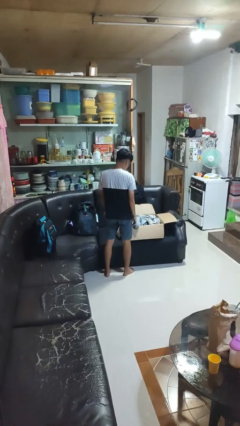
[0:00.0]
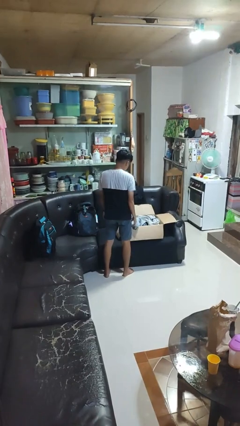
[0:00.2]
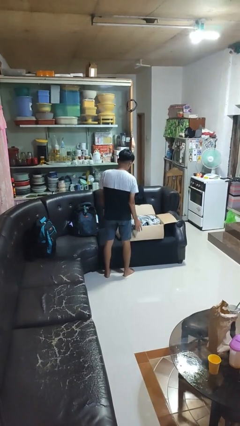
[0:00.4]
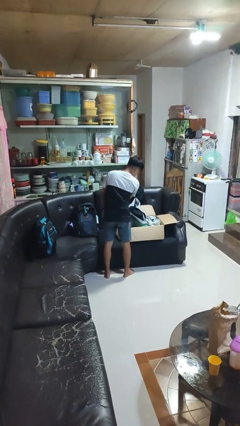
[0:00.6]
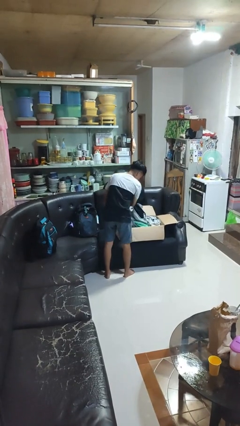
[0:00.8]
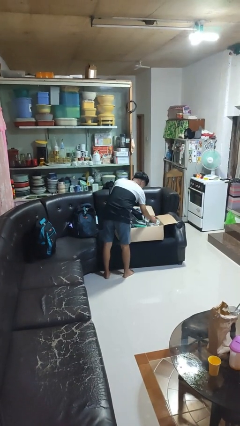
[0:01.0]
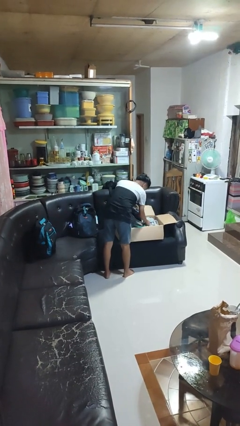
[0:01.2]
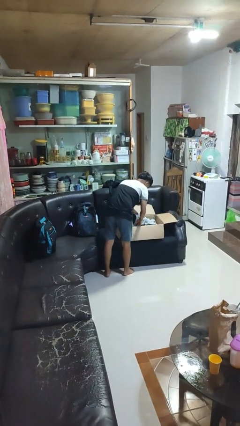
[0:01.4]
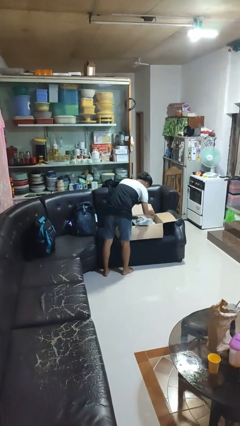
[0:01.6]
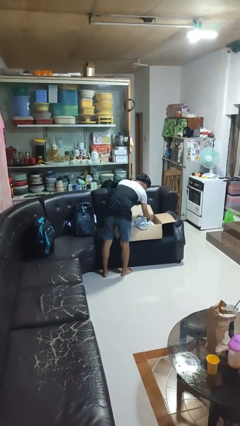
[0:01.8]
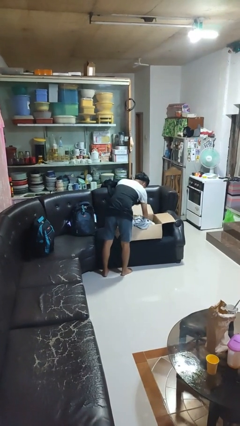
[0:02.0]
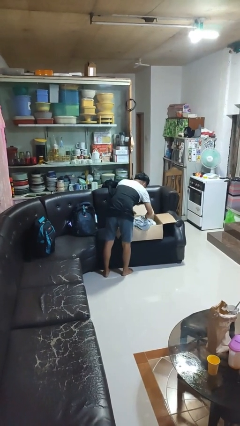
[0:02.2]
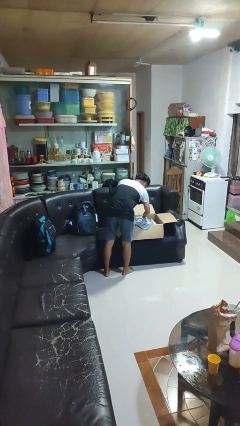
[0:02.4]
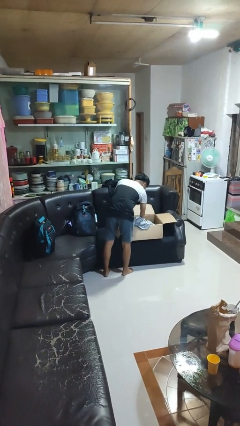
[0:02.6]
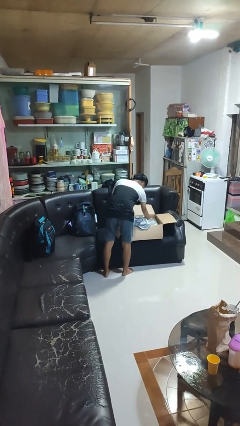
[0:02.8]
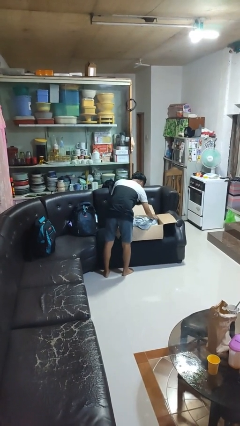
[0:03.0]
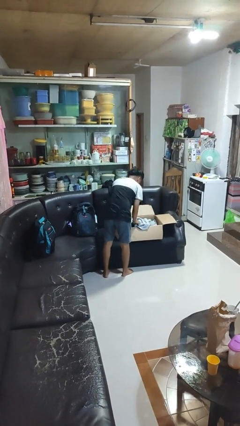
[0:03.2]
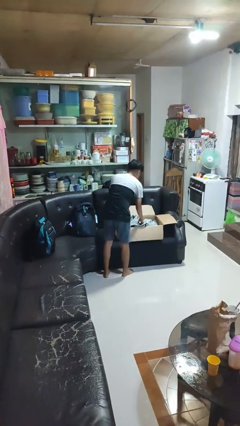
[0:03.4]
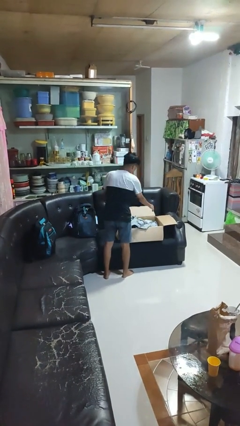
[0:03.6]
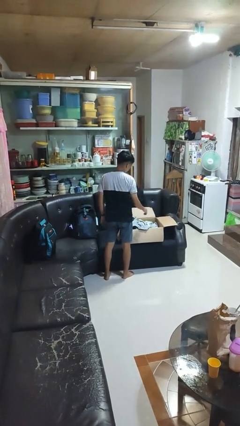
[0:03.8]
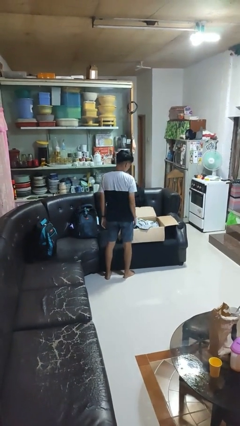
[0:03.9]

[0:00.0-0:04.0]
person searches in box

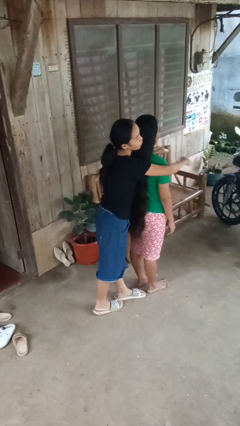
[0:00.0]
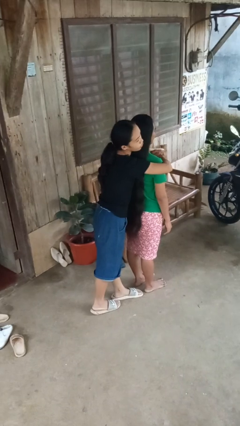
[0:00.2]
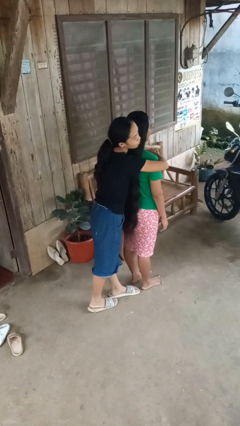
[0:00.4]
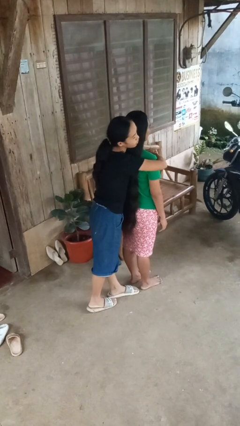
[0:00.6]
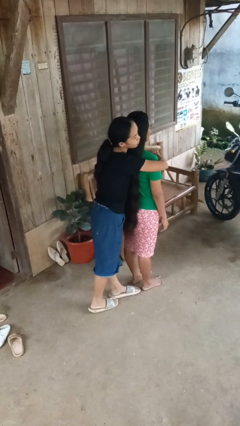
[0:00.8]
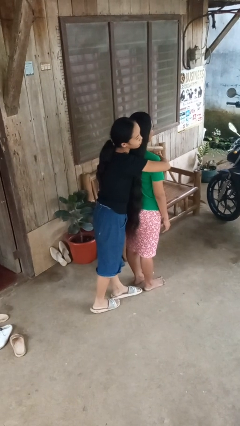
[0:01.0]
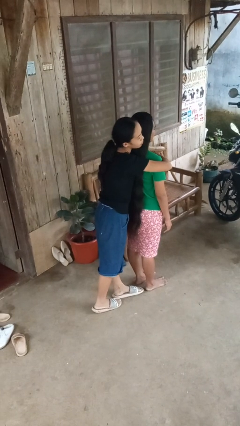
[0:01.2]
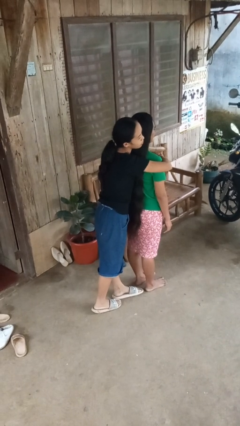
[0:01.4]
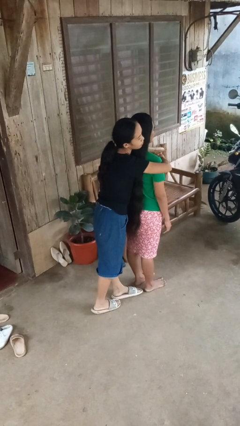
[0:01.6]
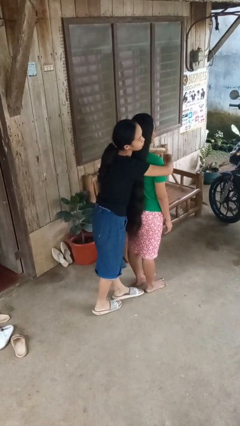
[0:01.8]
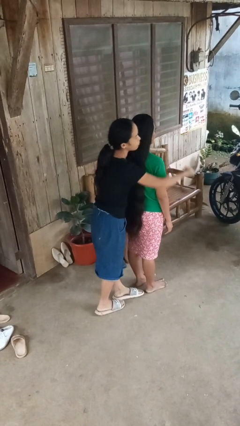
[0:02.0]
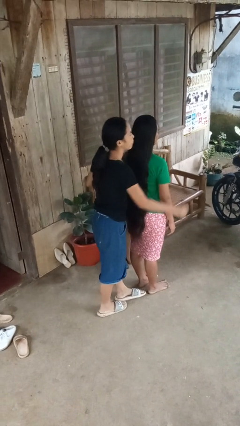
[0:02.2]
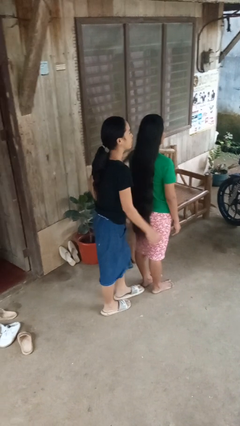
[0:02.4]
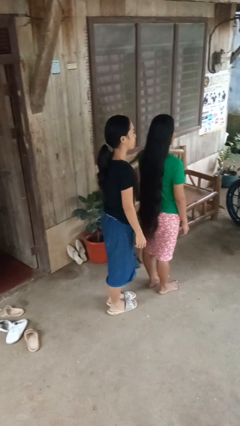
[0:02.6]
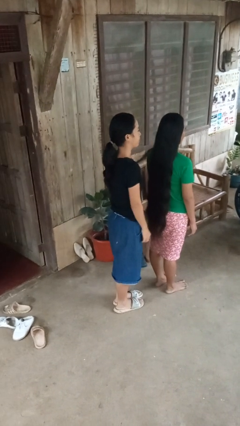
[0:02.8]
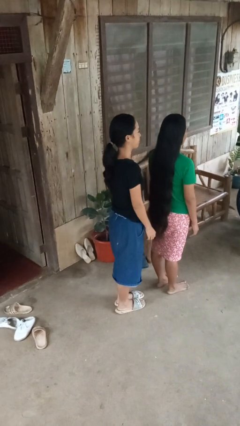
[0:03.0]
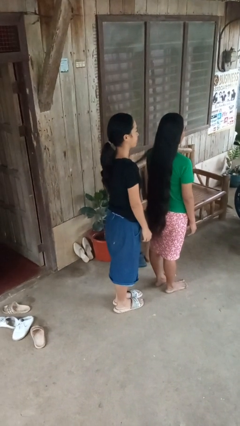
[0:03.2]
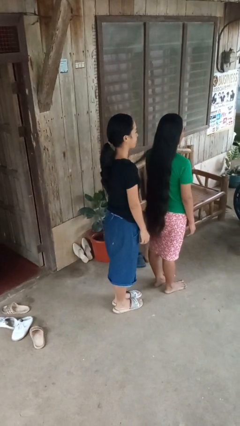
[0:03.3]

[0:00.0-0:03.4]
person hugs person from behind

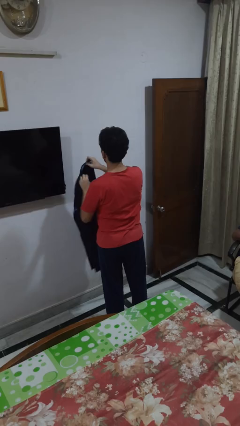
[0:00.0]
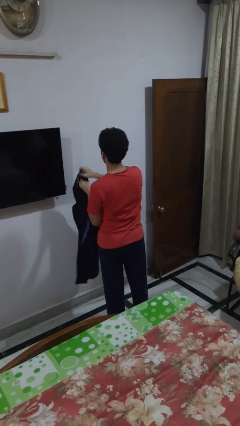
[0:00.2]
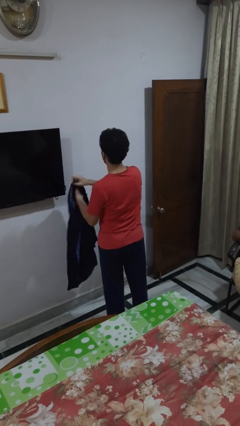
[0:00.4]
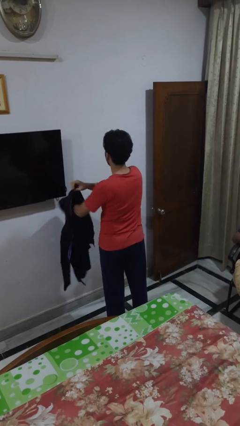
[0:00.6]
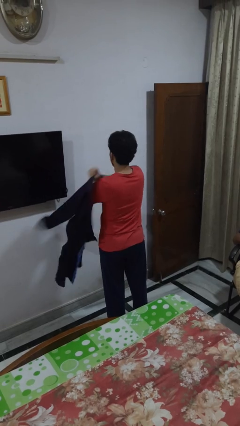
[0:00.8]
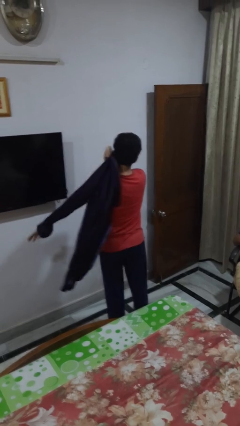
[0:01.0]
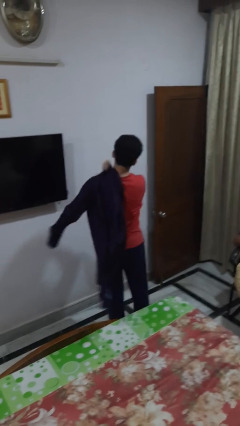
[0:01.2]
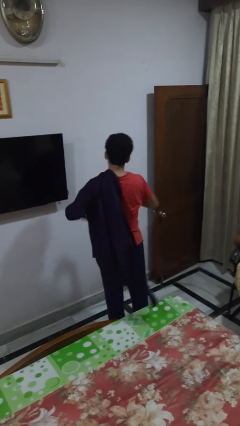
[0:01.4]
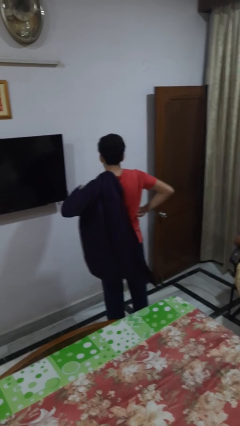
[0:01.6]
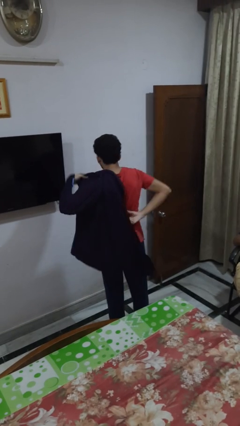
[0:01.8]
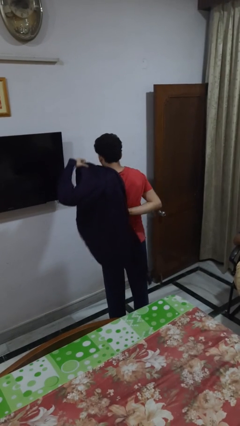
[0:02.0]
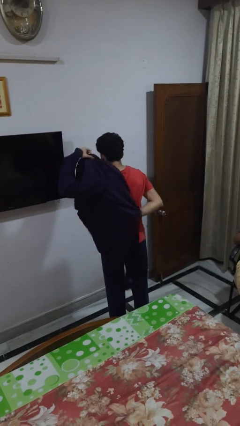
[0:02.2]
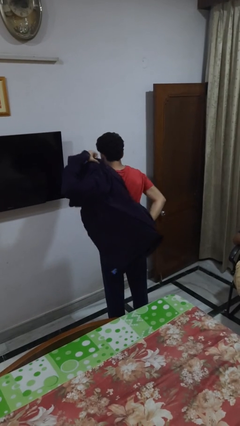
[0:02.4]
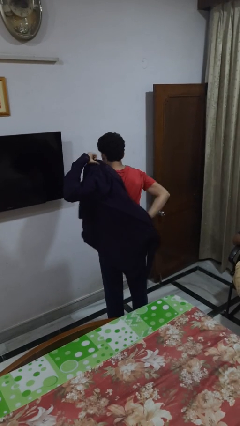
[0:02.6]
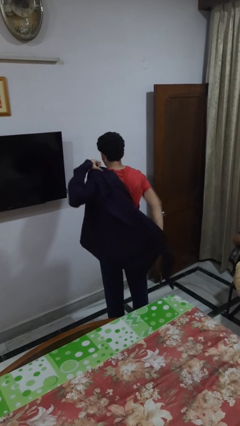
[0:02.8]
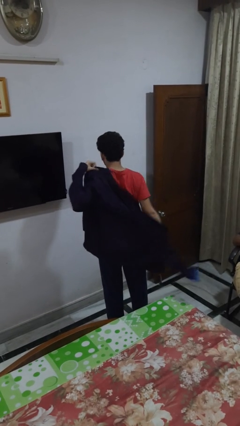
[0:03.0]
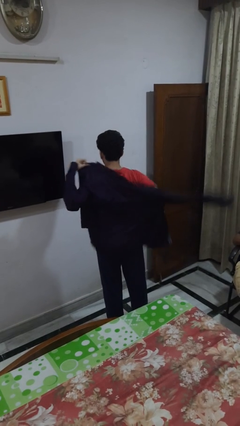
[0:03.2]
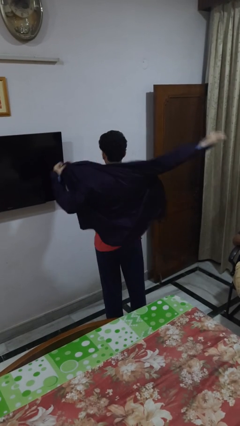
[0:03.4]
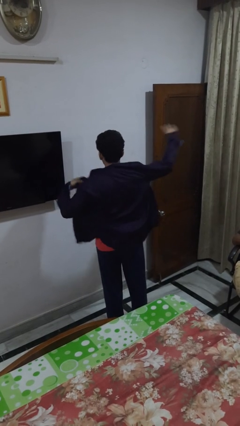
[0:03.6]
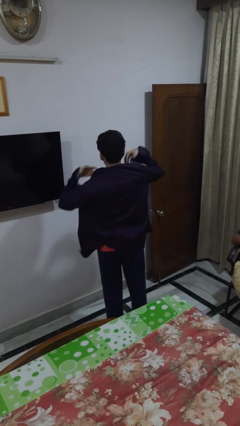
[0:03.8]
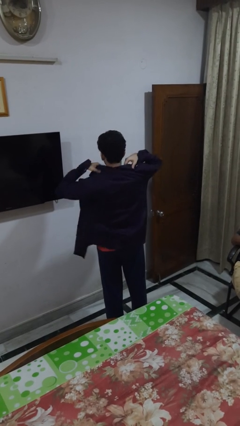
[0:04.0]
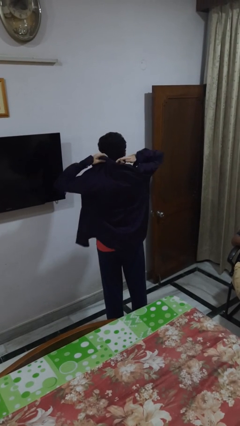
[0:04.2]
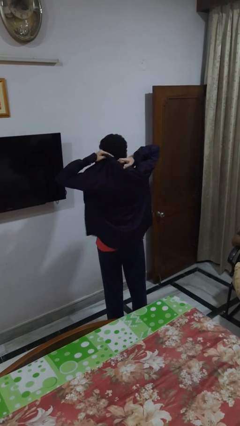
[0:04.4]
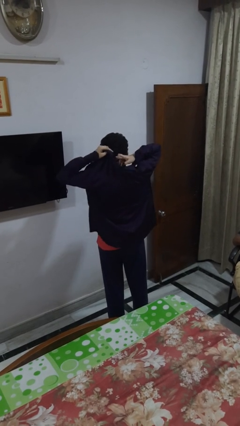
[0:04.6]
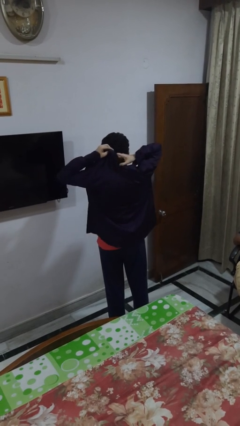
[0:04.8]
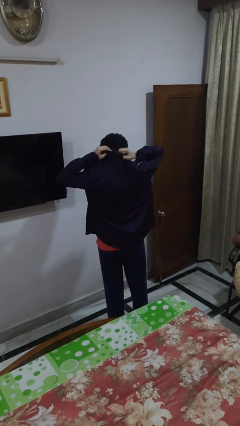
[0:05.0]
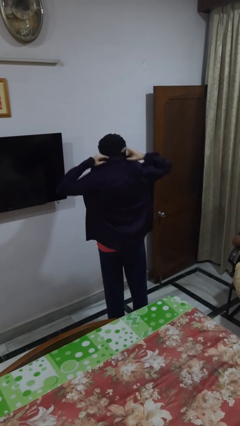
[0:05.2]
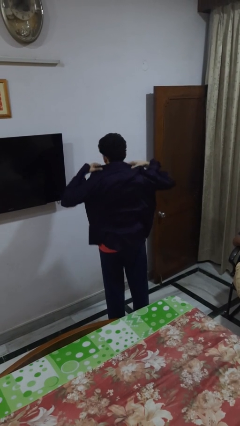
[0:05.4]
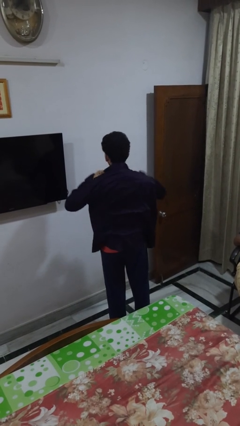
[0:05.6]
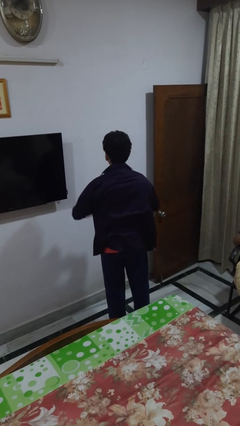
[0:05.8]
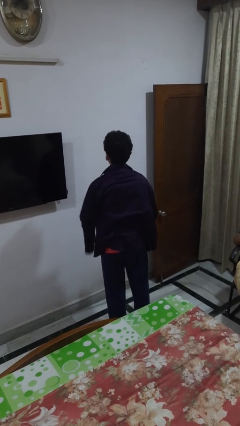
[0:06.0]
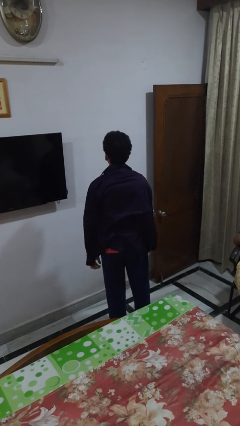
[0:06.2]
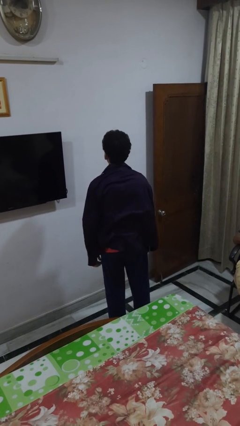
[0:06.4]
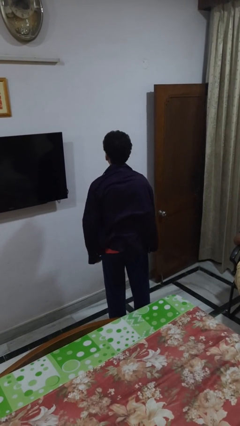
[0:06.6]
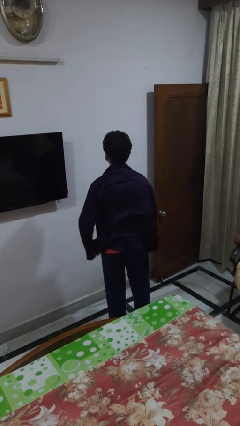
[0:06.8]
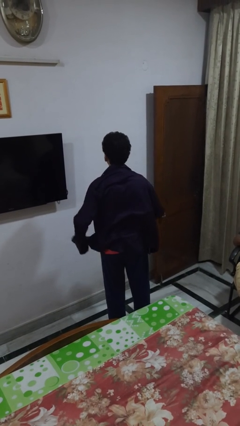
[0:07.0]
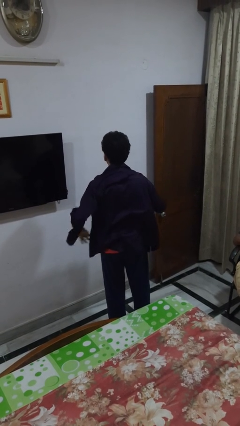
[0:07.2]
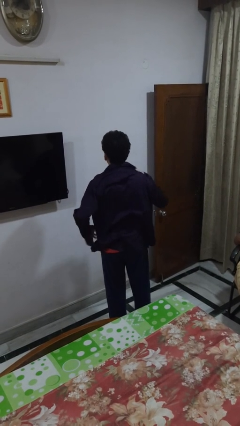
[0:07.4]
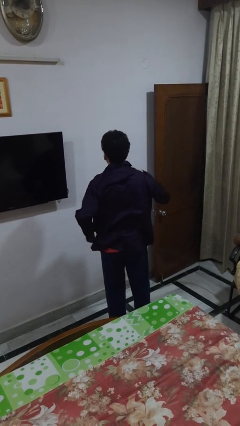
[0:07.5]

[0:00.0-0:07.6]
person puts on shirt

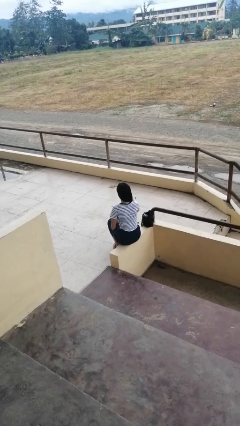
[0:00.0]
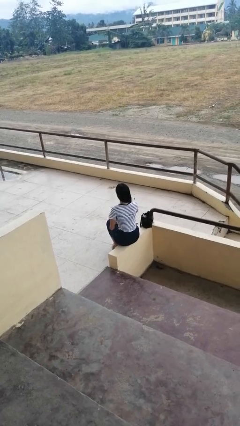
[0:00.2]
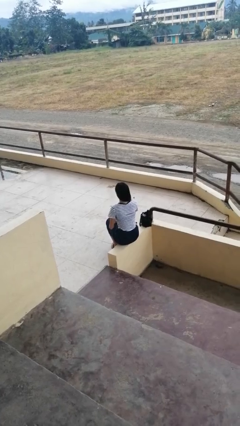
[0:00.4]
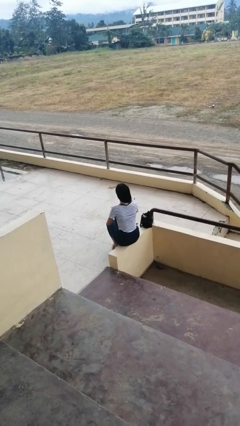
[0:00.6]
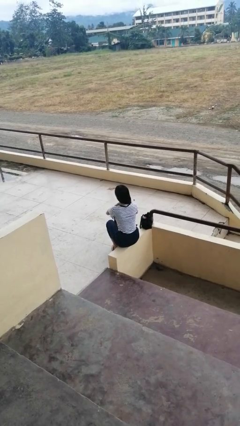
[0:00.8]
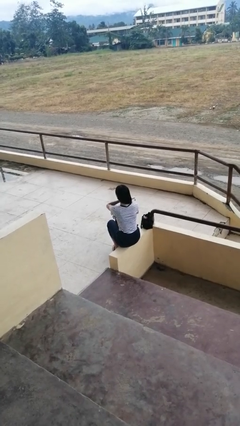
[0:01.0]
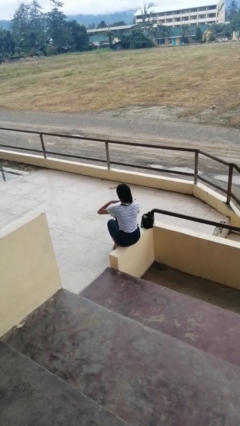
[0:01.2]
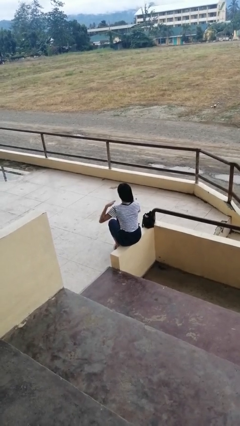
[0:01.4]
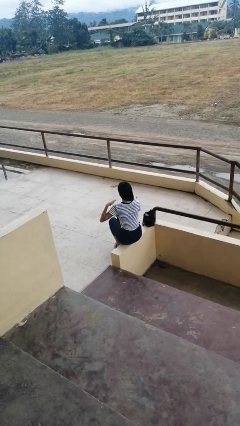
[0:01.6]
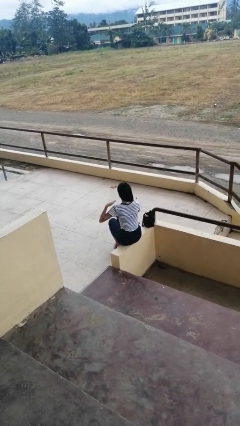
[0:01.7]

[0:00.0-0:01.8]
person gestures cut

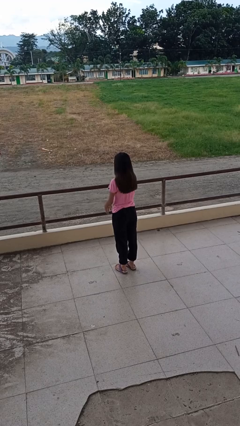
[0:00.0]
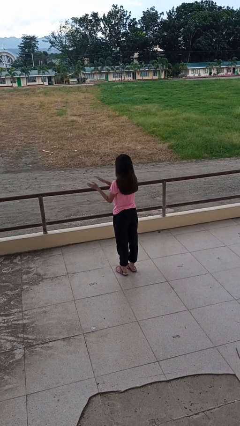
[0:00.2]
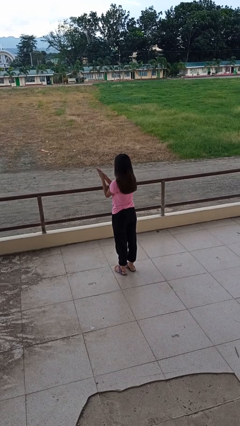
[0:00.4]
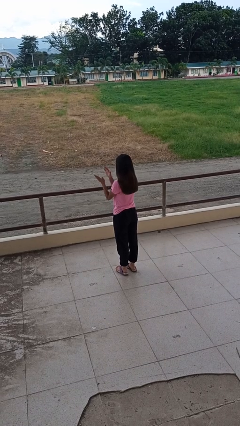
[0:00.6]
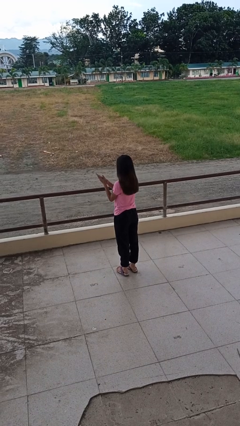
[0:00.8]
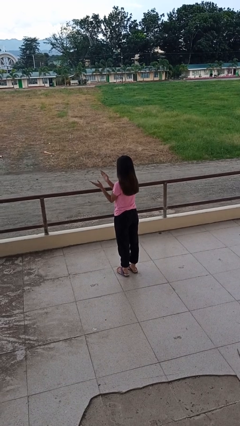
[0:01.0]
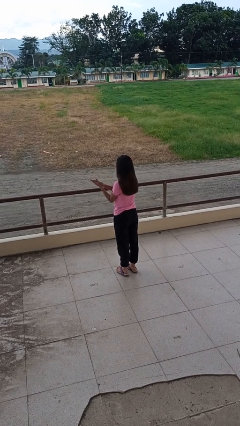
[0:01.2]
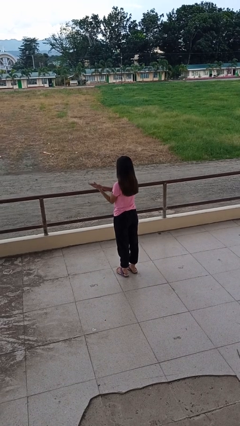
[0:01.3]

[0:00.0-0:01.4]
person claps hands
